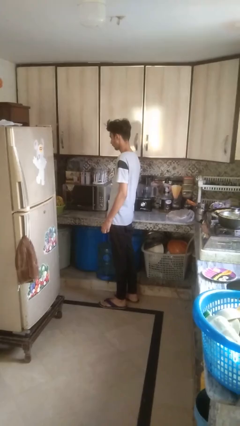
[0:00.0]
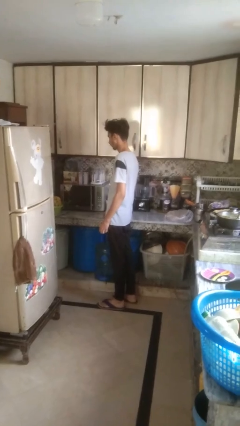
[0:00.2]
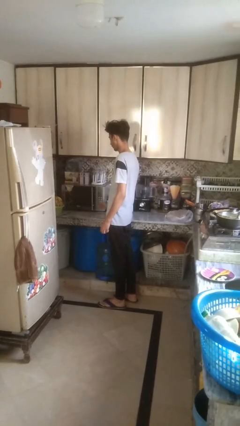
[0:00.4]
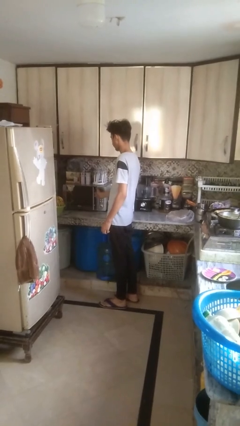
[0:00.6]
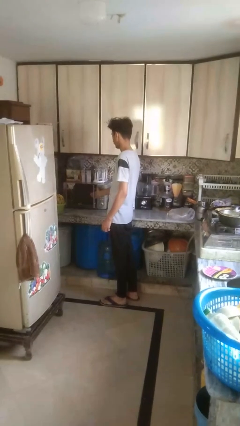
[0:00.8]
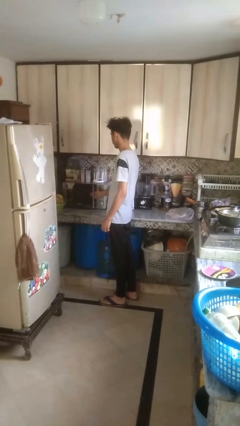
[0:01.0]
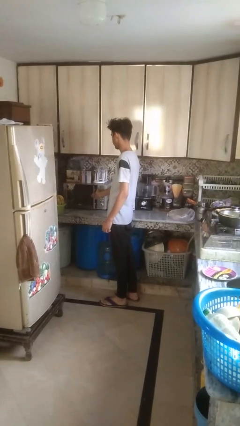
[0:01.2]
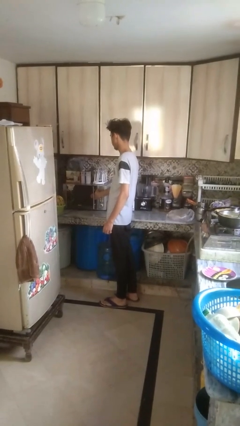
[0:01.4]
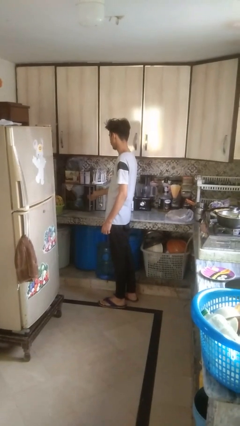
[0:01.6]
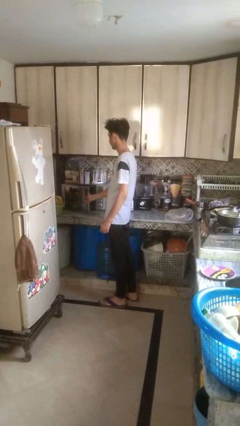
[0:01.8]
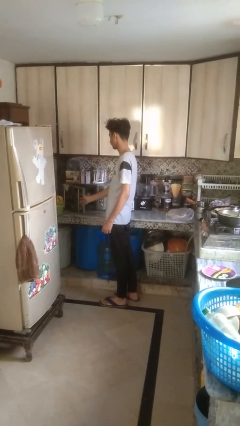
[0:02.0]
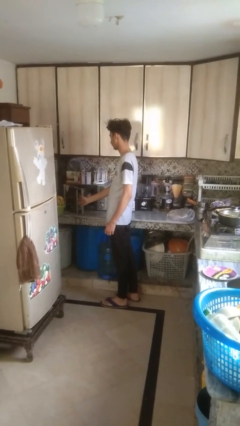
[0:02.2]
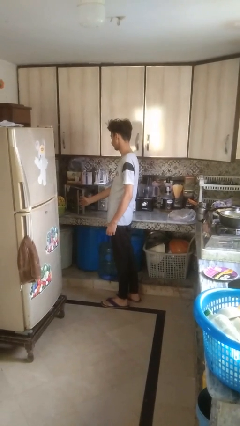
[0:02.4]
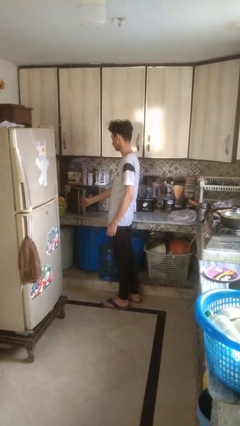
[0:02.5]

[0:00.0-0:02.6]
person opens oven door

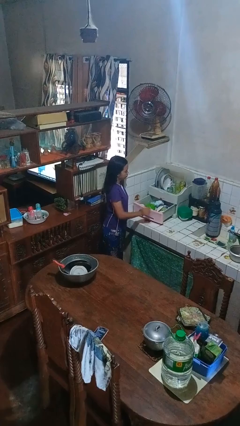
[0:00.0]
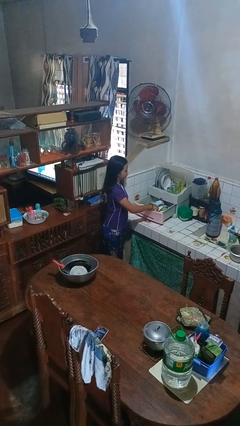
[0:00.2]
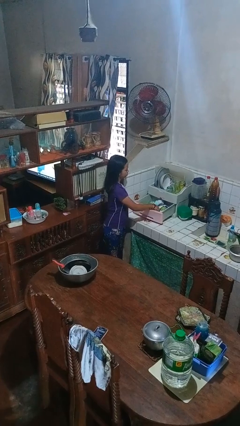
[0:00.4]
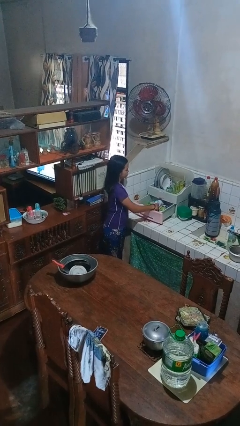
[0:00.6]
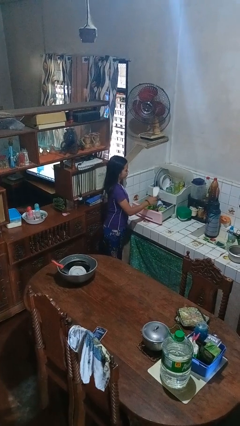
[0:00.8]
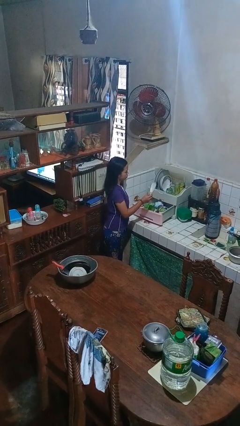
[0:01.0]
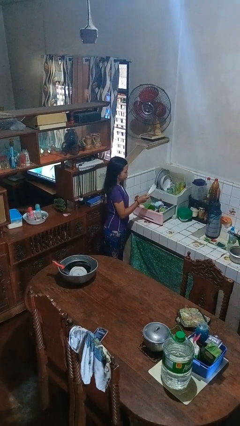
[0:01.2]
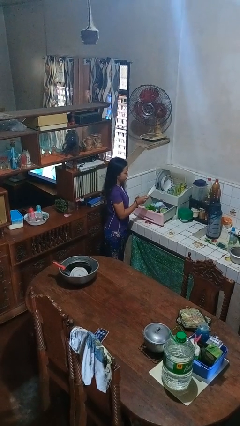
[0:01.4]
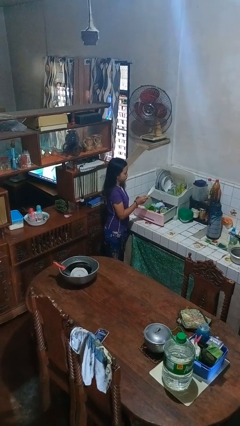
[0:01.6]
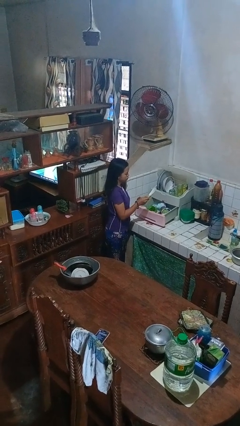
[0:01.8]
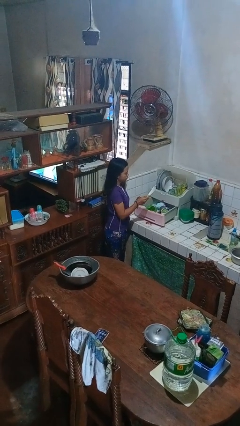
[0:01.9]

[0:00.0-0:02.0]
person takes object from kitchen drawer

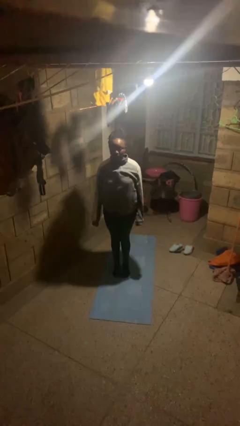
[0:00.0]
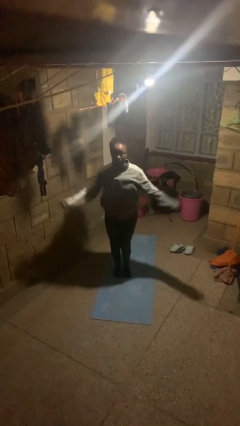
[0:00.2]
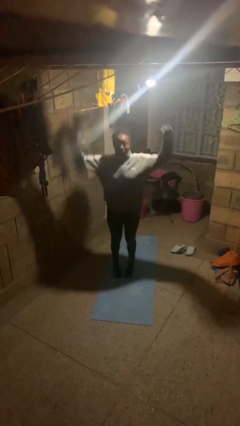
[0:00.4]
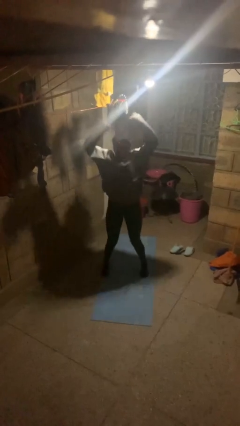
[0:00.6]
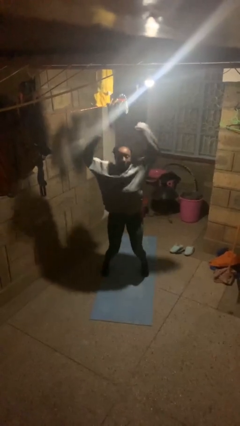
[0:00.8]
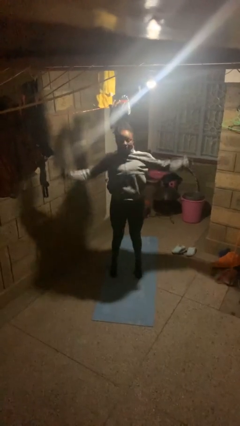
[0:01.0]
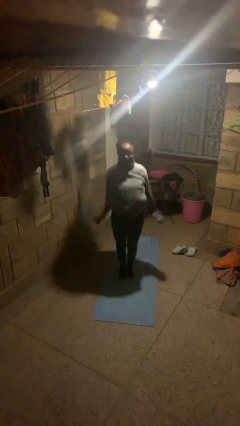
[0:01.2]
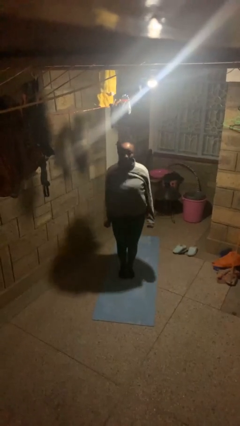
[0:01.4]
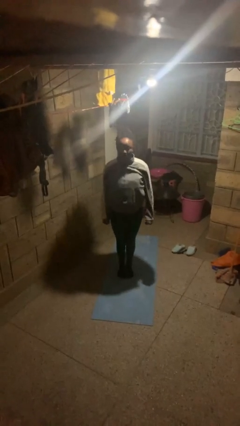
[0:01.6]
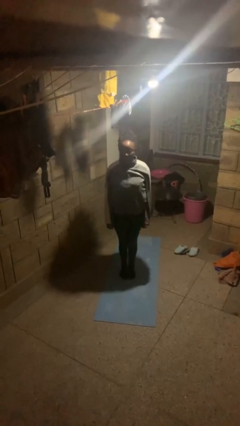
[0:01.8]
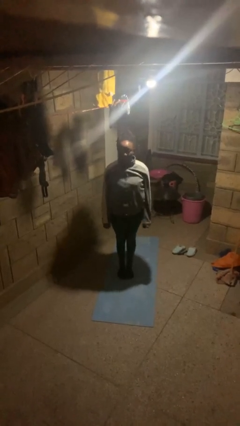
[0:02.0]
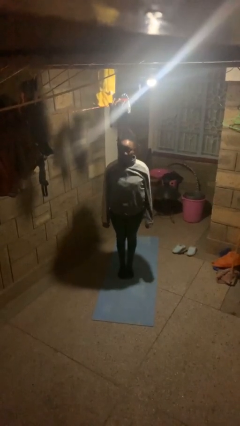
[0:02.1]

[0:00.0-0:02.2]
person exercises with jumping jacks

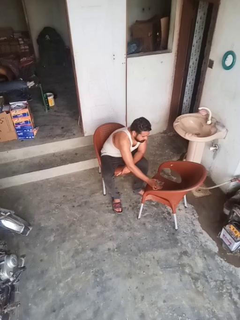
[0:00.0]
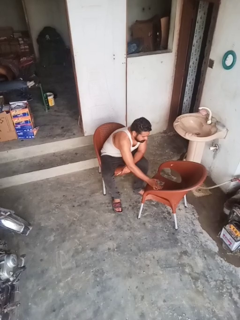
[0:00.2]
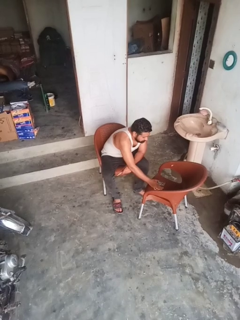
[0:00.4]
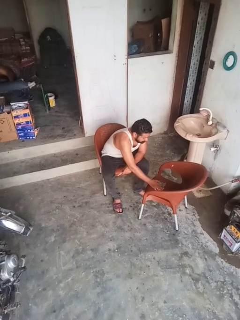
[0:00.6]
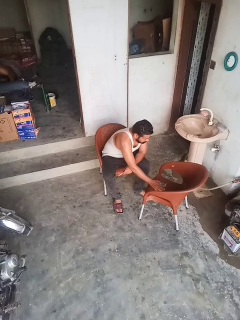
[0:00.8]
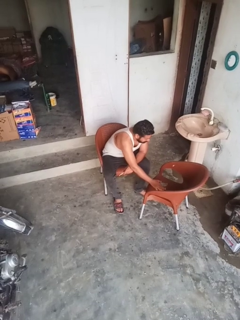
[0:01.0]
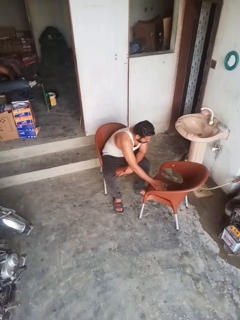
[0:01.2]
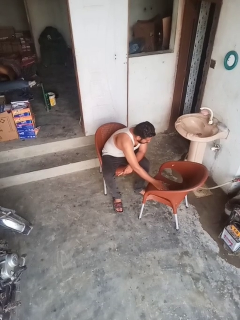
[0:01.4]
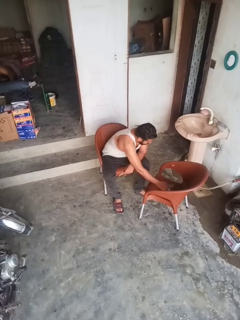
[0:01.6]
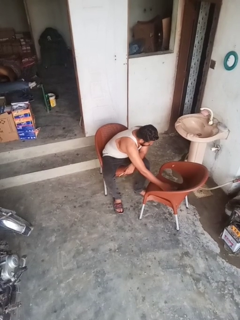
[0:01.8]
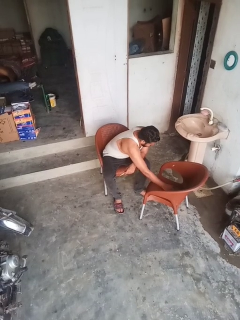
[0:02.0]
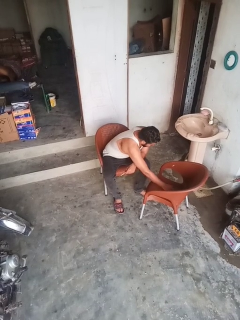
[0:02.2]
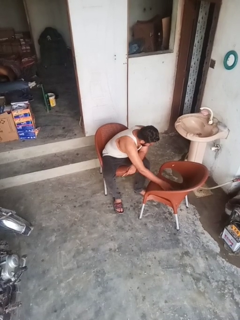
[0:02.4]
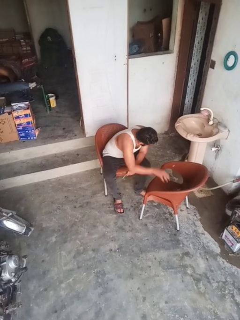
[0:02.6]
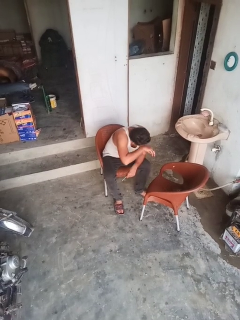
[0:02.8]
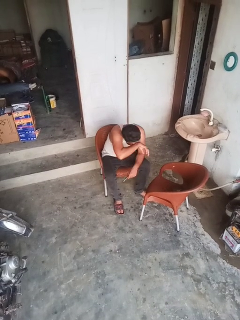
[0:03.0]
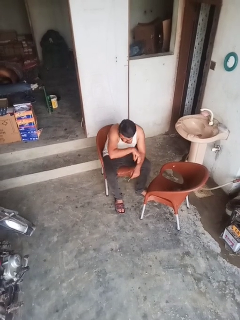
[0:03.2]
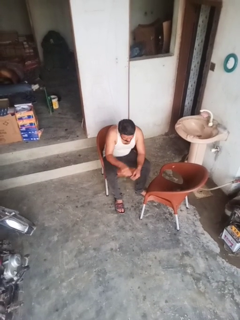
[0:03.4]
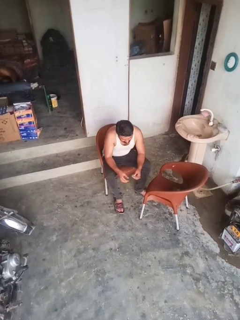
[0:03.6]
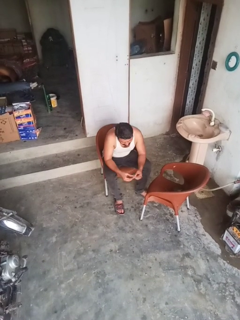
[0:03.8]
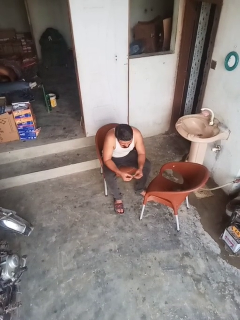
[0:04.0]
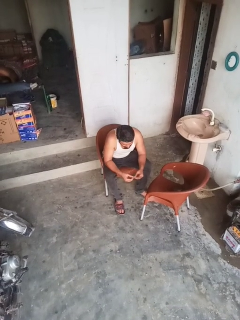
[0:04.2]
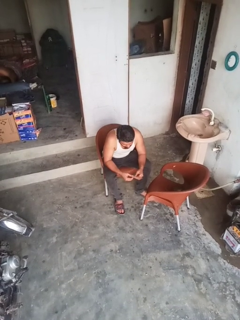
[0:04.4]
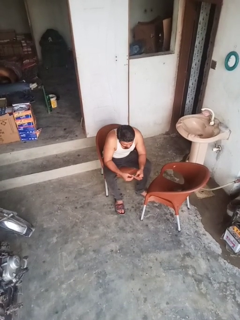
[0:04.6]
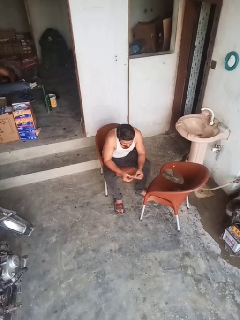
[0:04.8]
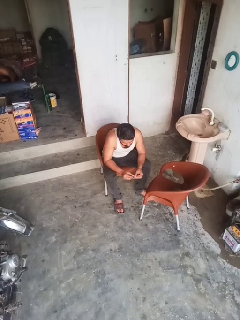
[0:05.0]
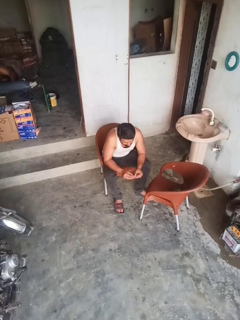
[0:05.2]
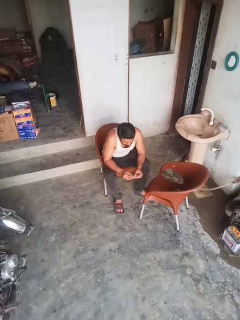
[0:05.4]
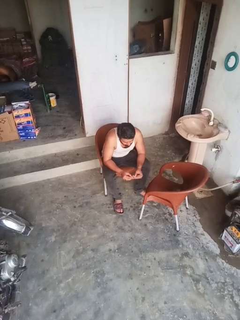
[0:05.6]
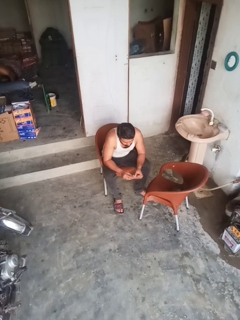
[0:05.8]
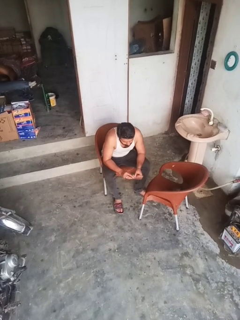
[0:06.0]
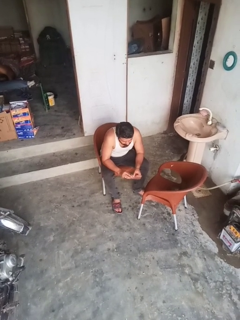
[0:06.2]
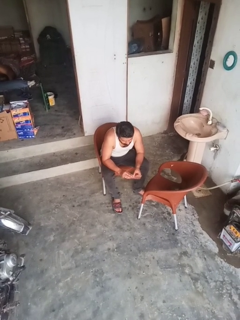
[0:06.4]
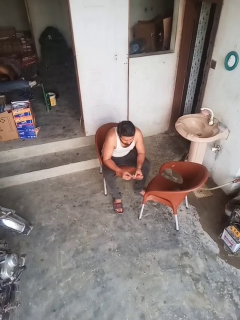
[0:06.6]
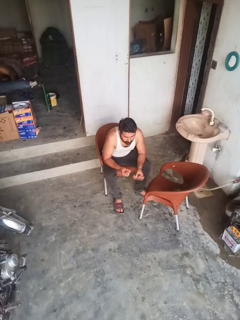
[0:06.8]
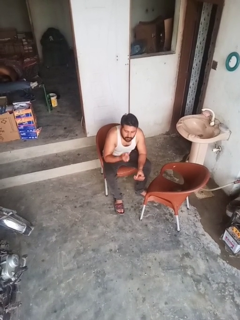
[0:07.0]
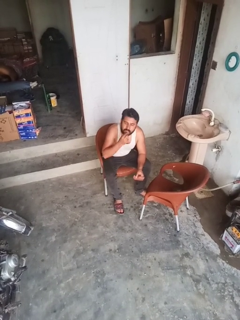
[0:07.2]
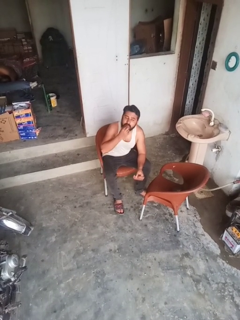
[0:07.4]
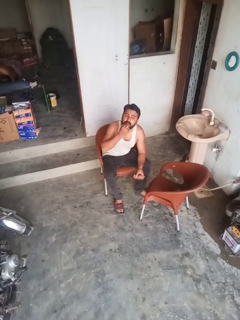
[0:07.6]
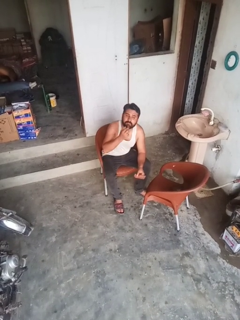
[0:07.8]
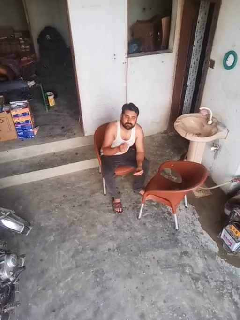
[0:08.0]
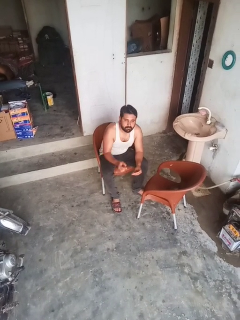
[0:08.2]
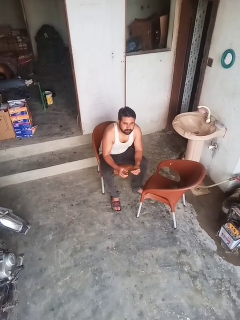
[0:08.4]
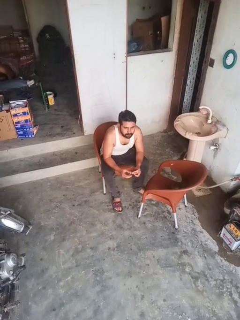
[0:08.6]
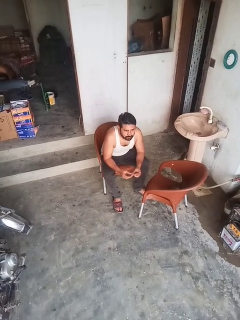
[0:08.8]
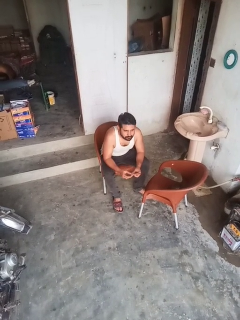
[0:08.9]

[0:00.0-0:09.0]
person takes medicine pills

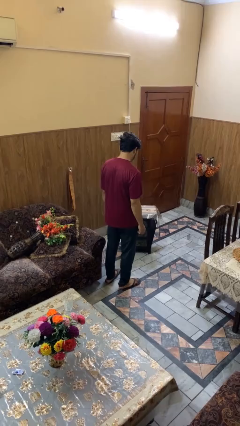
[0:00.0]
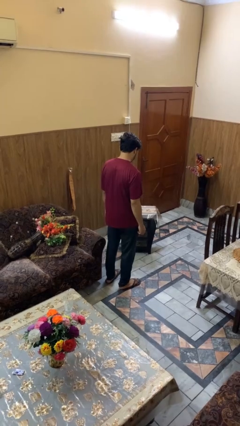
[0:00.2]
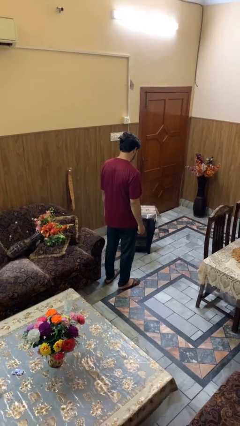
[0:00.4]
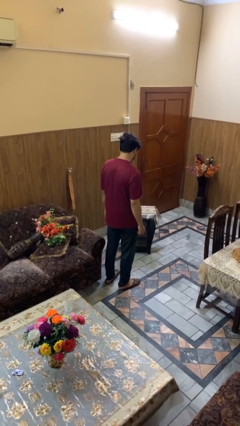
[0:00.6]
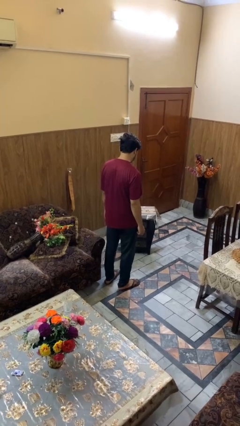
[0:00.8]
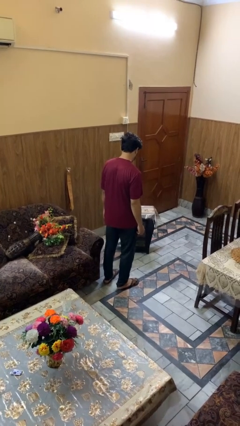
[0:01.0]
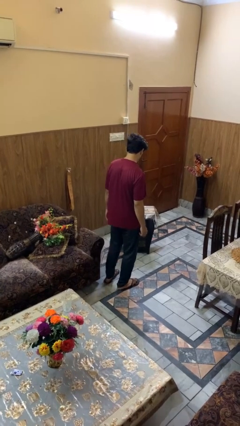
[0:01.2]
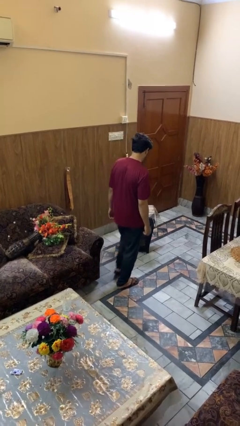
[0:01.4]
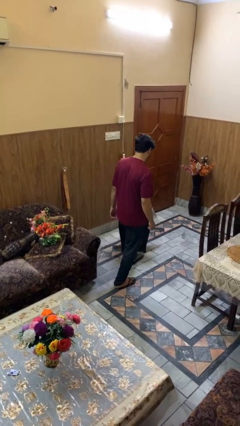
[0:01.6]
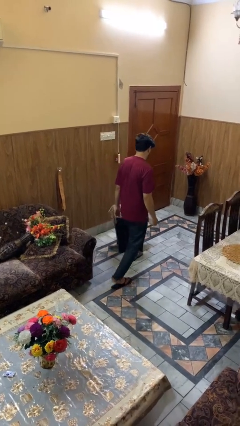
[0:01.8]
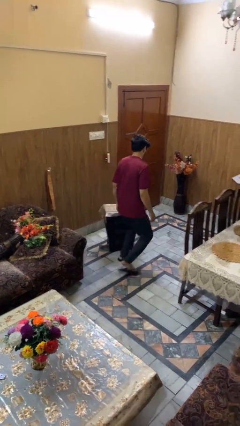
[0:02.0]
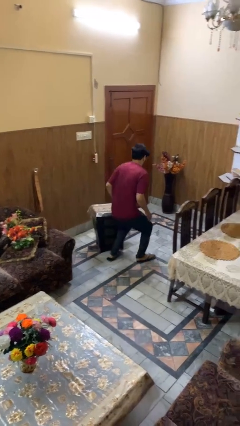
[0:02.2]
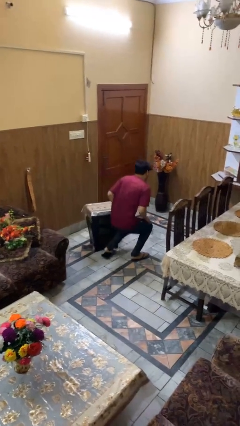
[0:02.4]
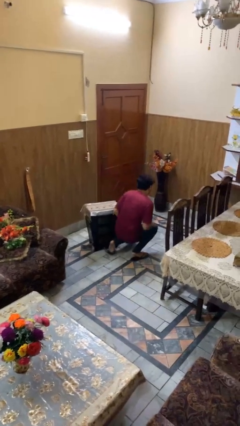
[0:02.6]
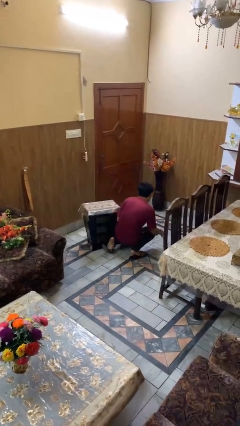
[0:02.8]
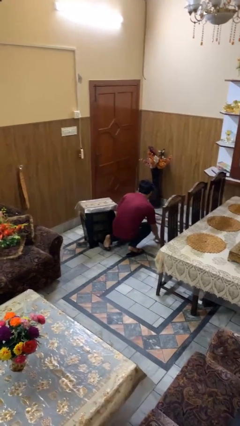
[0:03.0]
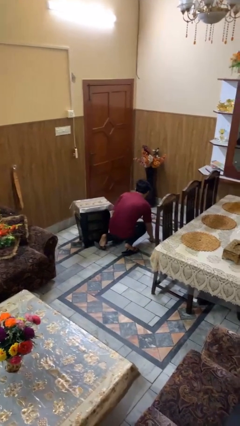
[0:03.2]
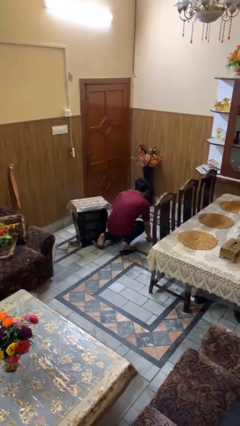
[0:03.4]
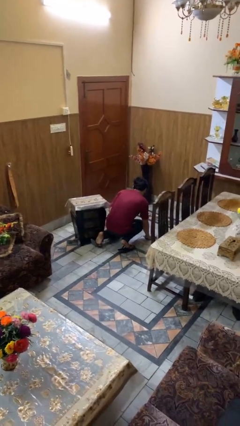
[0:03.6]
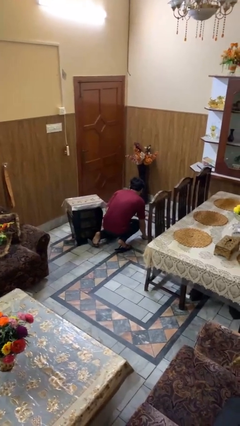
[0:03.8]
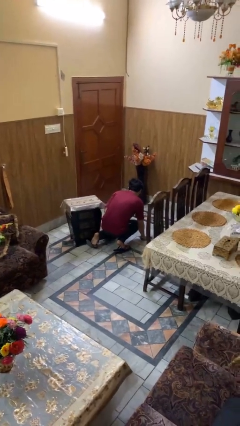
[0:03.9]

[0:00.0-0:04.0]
person trips on object on floor
